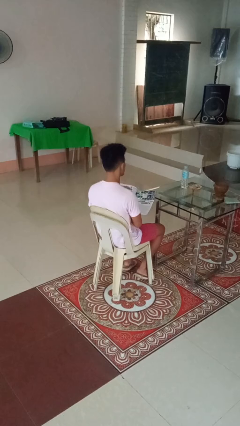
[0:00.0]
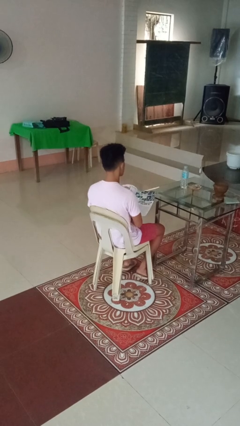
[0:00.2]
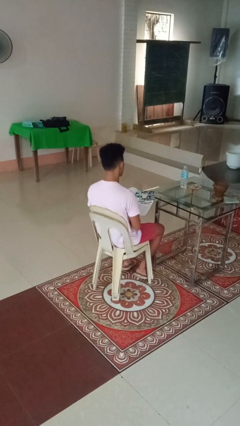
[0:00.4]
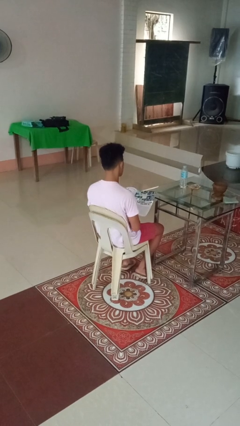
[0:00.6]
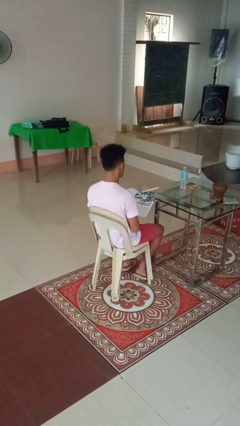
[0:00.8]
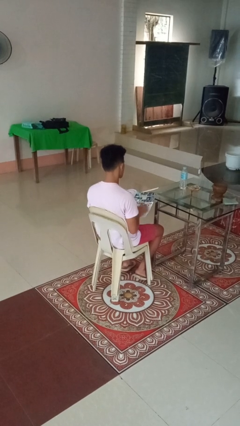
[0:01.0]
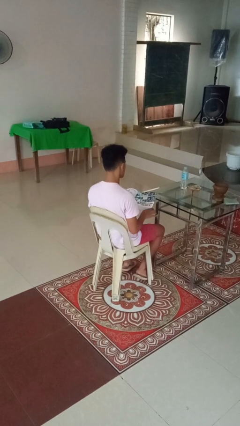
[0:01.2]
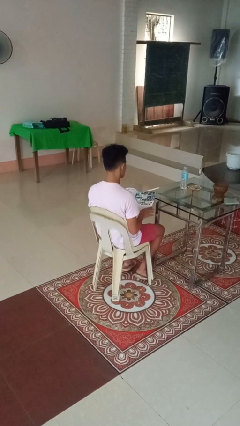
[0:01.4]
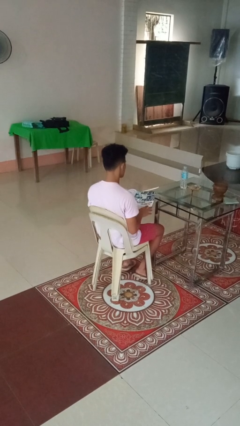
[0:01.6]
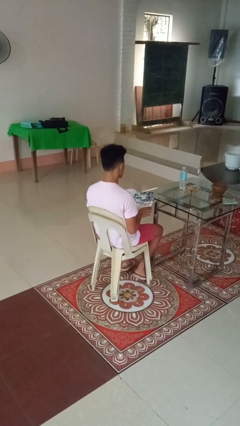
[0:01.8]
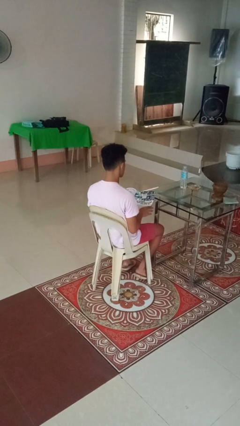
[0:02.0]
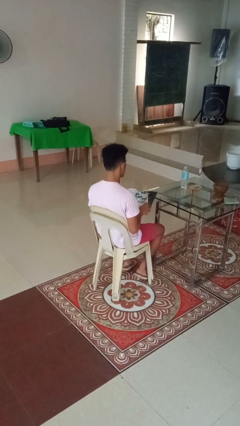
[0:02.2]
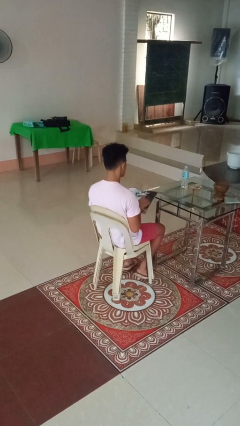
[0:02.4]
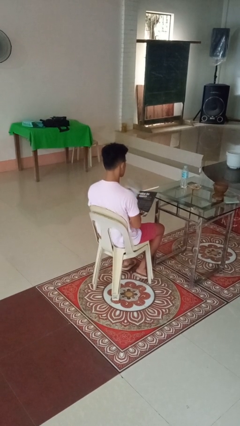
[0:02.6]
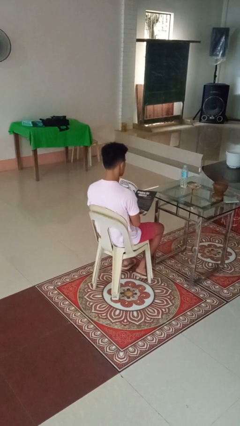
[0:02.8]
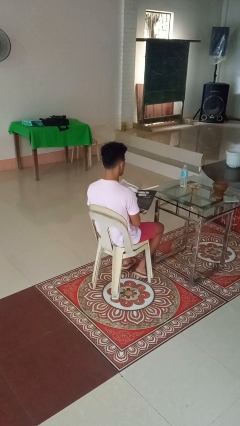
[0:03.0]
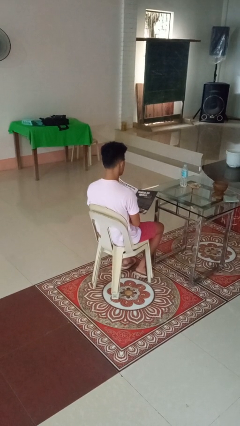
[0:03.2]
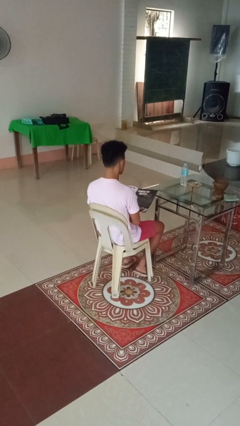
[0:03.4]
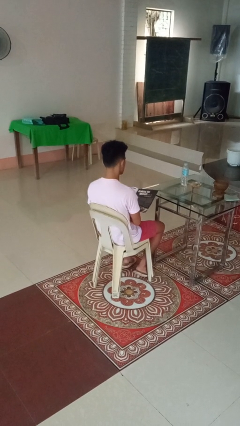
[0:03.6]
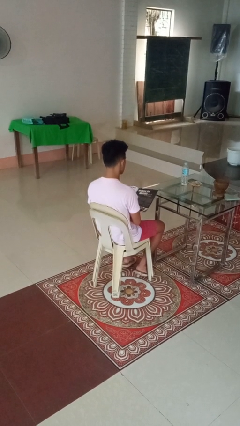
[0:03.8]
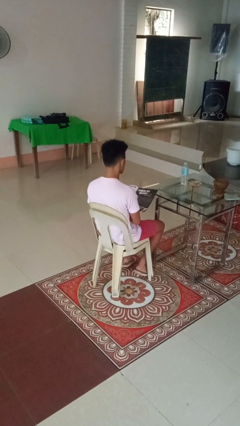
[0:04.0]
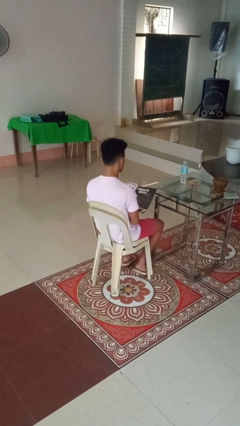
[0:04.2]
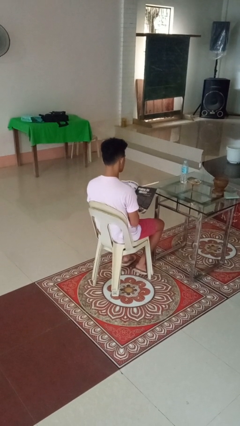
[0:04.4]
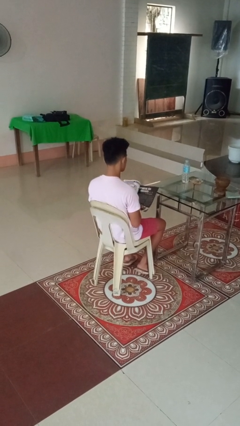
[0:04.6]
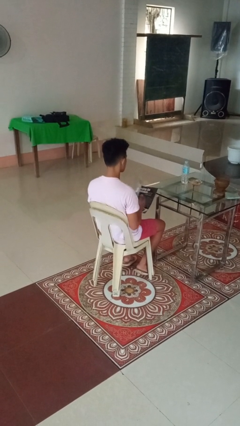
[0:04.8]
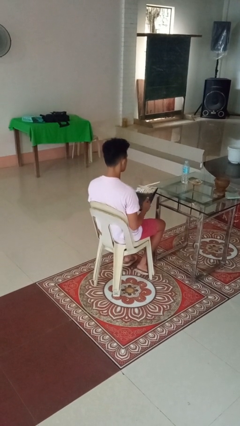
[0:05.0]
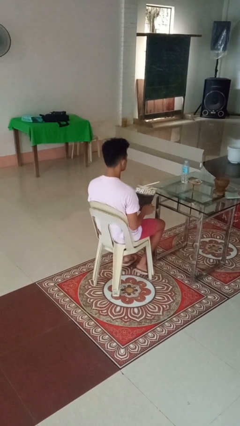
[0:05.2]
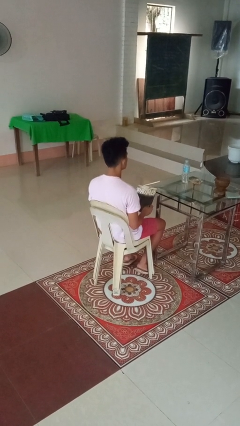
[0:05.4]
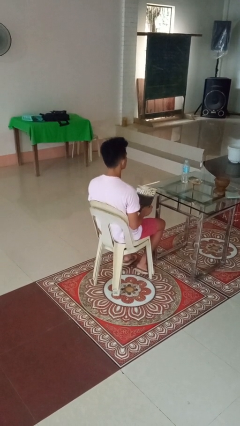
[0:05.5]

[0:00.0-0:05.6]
person reads magazine

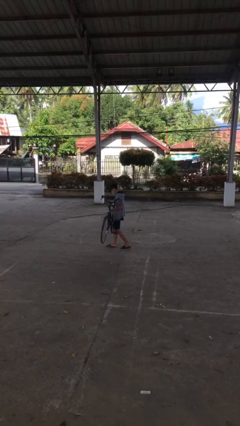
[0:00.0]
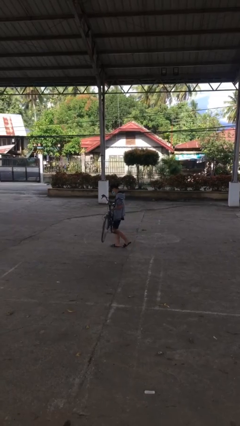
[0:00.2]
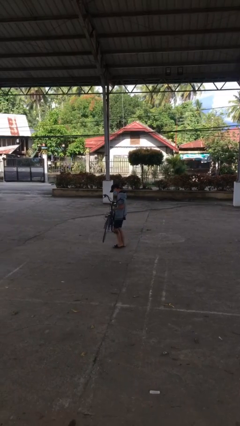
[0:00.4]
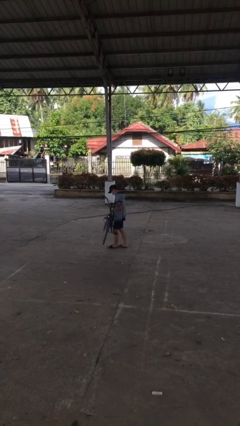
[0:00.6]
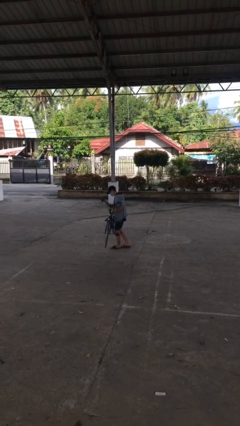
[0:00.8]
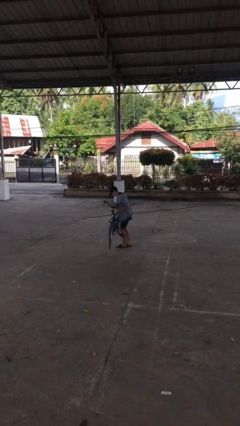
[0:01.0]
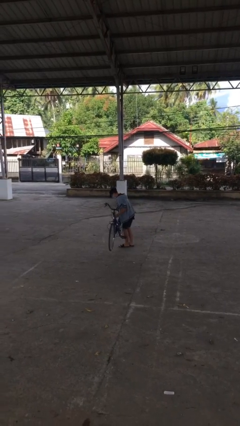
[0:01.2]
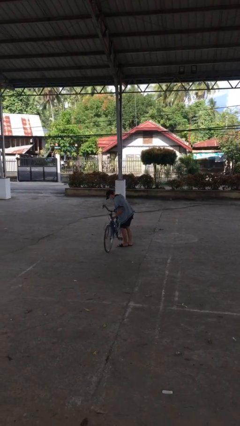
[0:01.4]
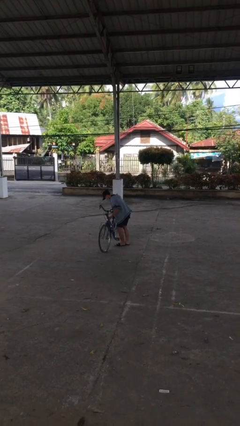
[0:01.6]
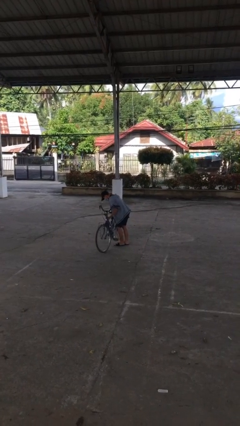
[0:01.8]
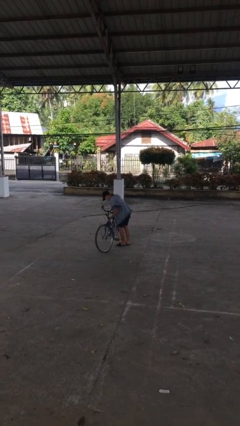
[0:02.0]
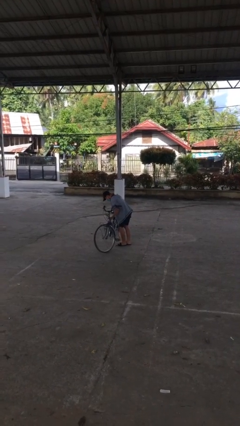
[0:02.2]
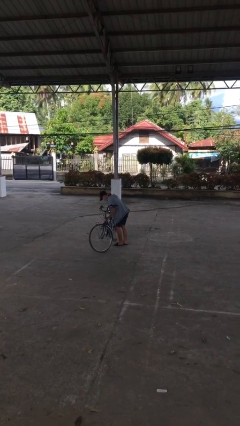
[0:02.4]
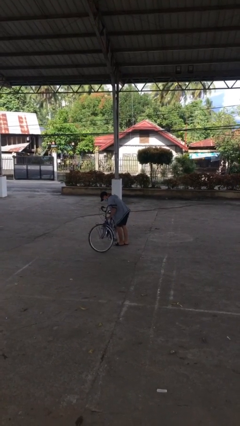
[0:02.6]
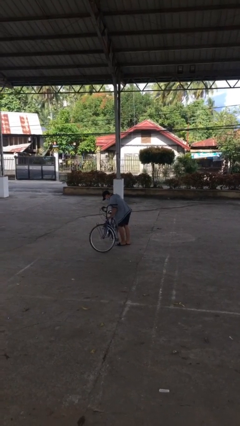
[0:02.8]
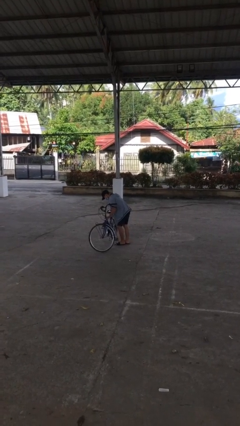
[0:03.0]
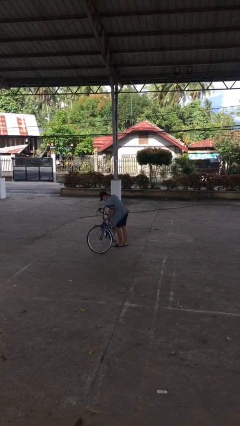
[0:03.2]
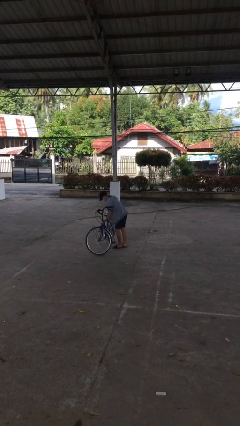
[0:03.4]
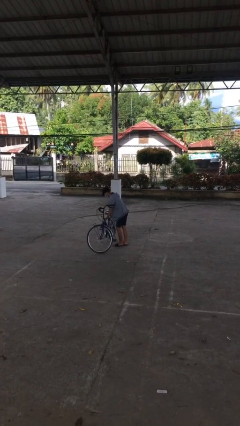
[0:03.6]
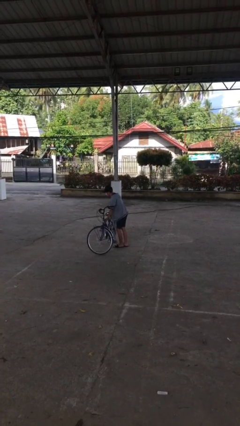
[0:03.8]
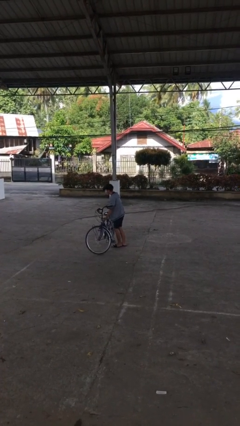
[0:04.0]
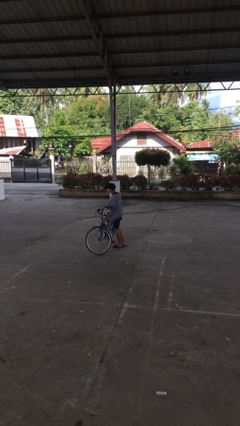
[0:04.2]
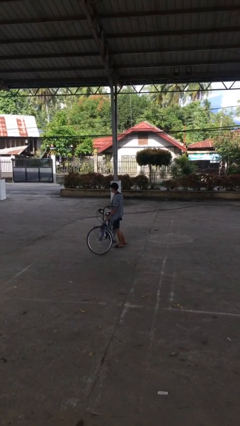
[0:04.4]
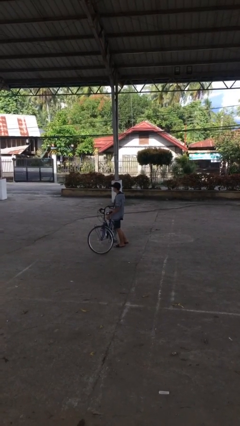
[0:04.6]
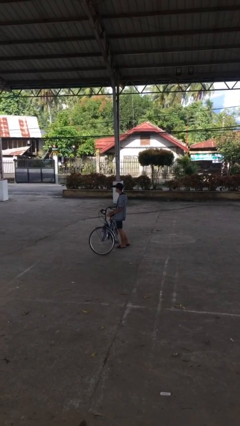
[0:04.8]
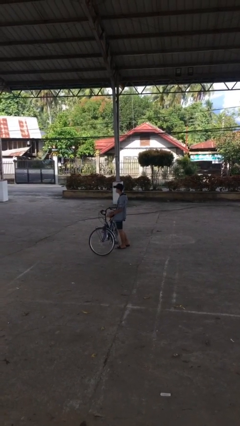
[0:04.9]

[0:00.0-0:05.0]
person puts down object on floor

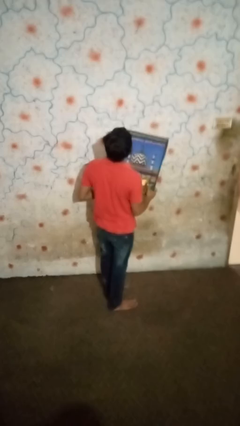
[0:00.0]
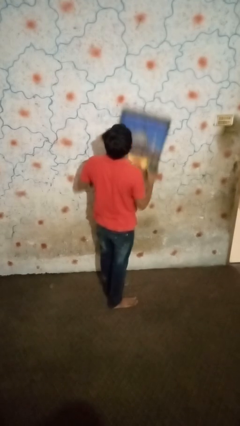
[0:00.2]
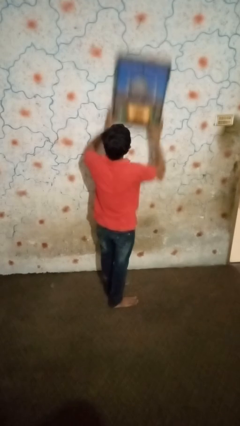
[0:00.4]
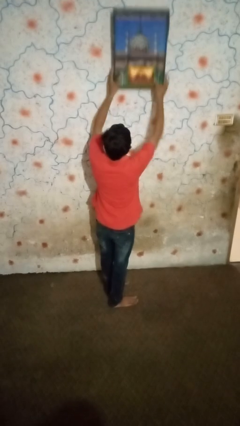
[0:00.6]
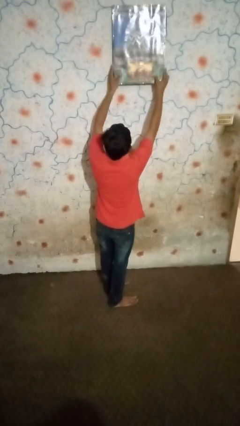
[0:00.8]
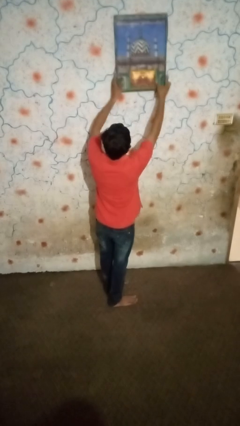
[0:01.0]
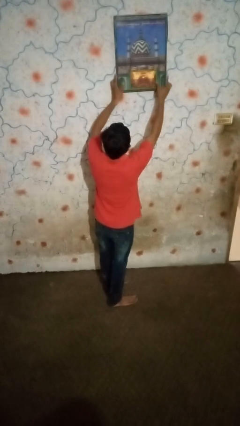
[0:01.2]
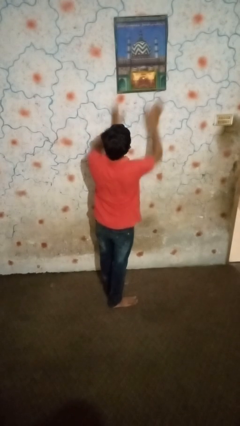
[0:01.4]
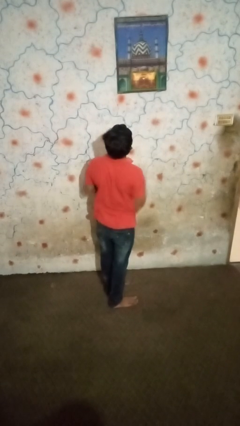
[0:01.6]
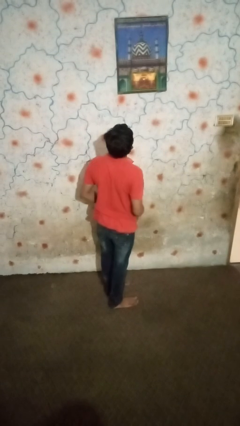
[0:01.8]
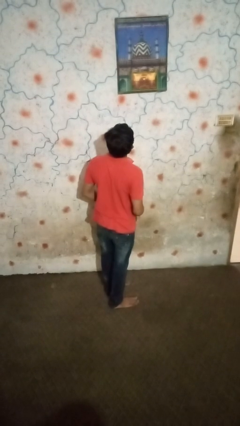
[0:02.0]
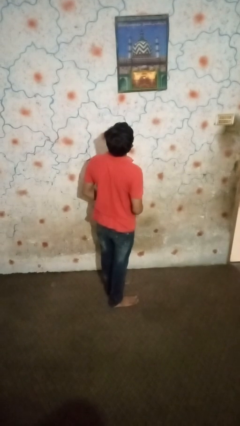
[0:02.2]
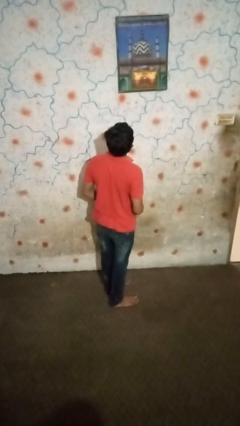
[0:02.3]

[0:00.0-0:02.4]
person puts up picture frame

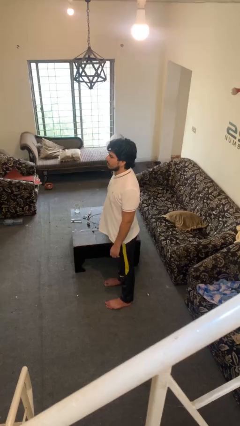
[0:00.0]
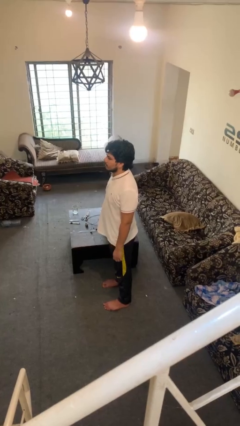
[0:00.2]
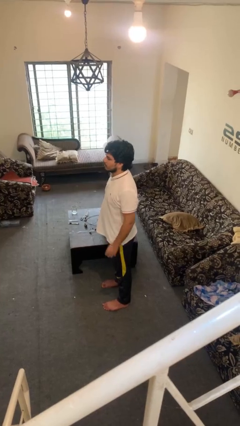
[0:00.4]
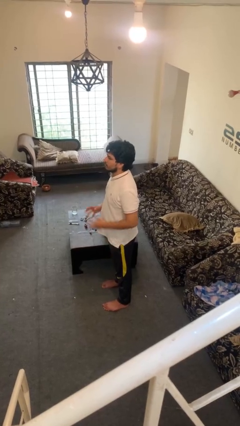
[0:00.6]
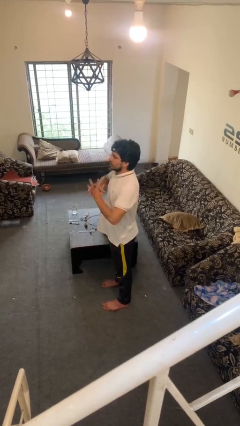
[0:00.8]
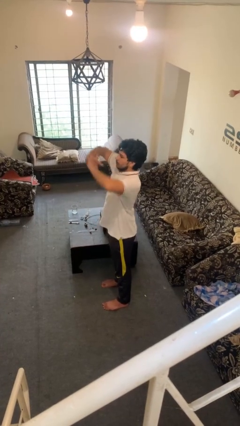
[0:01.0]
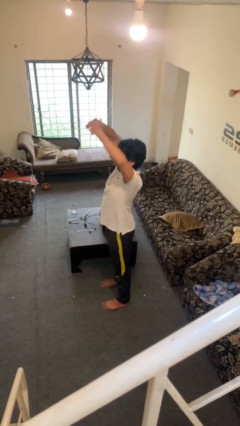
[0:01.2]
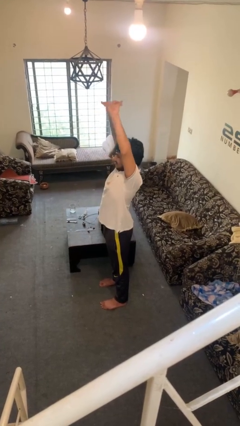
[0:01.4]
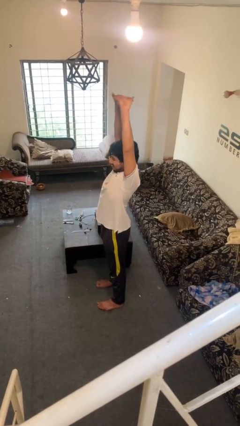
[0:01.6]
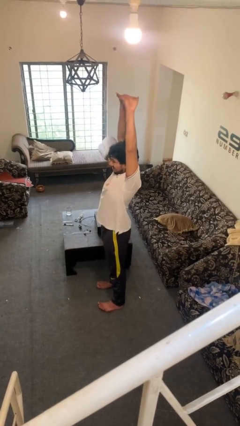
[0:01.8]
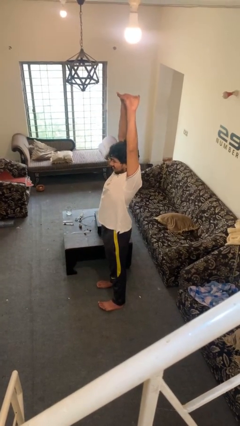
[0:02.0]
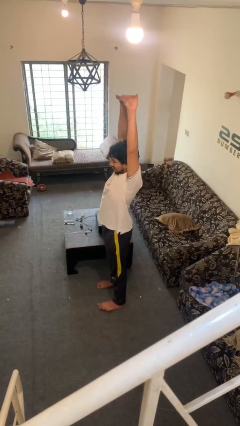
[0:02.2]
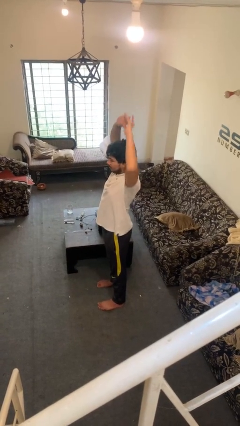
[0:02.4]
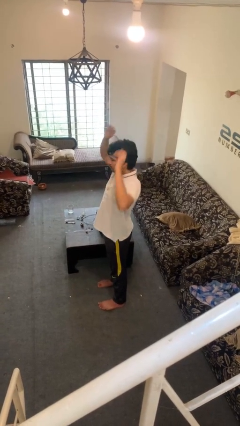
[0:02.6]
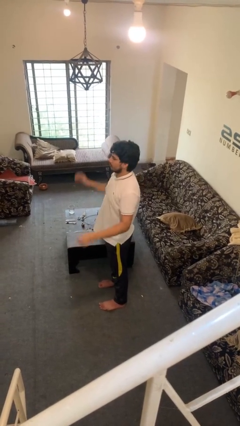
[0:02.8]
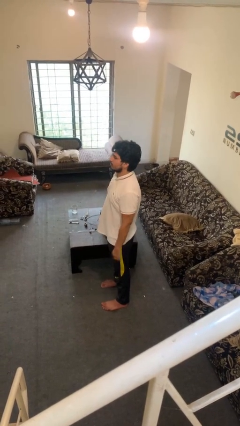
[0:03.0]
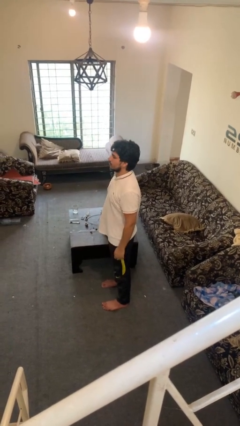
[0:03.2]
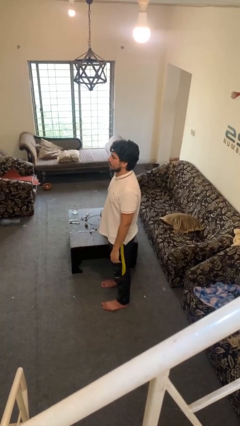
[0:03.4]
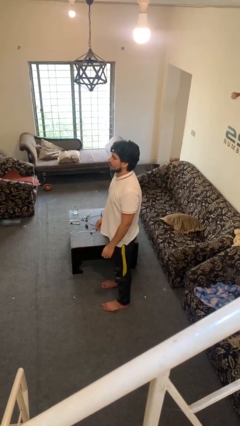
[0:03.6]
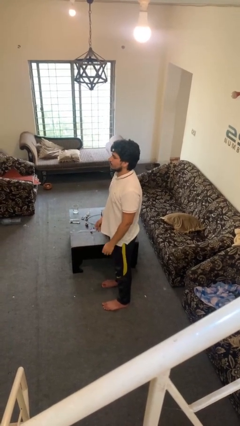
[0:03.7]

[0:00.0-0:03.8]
person stretches arms over head
